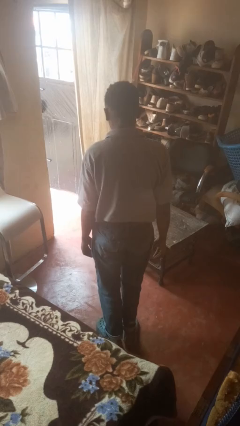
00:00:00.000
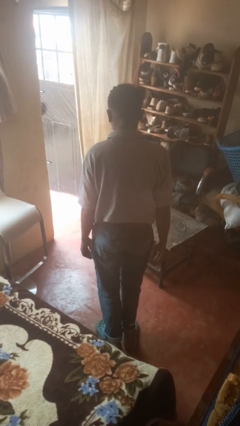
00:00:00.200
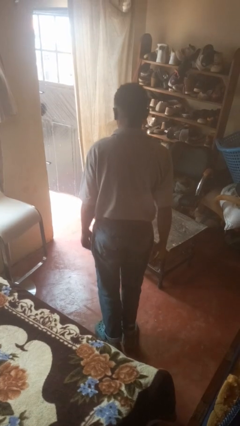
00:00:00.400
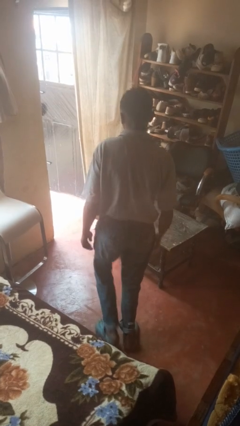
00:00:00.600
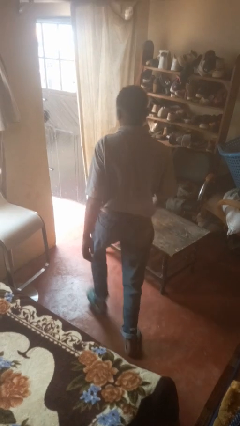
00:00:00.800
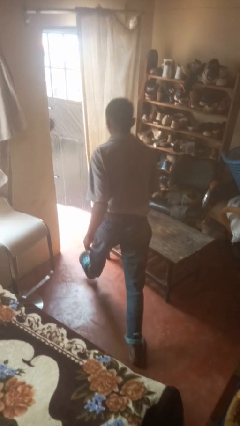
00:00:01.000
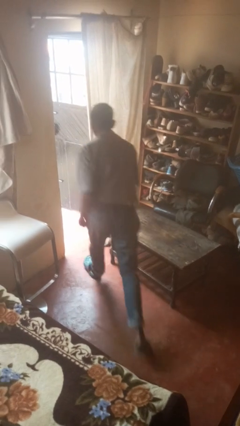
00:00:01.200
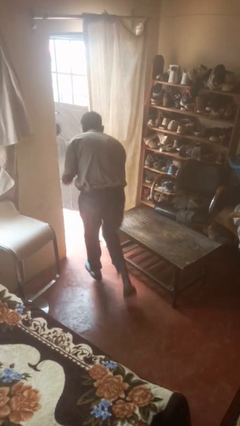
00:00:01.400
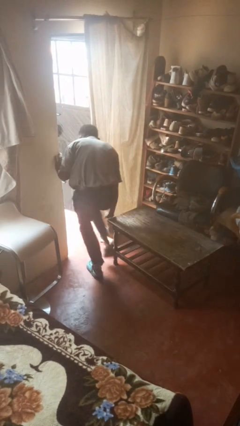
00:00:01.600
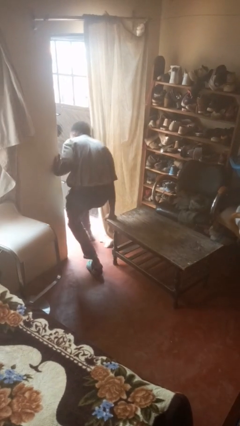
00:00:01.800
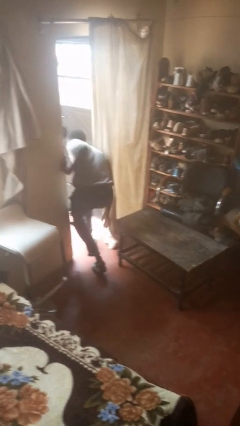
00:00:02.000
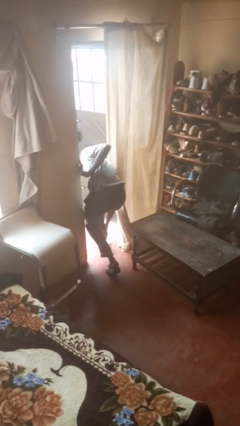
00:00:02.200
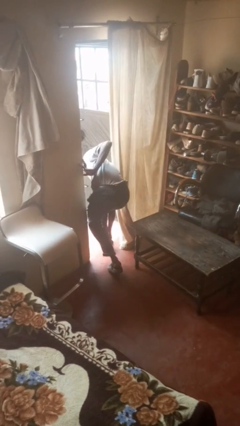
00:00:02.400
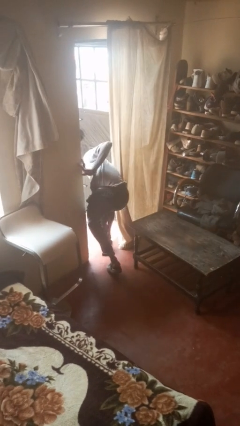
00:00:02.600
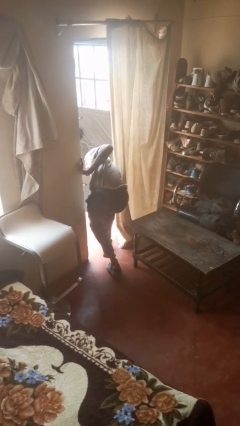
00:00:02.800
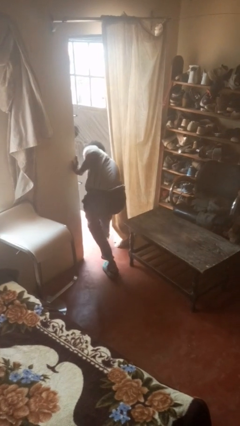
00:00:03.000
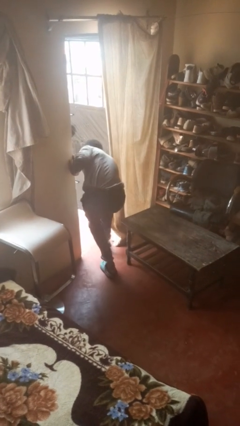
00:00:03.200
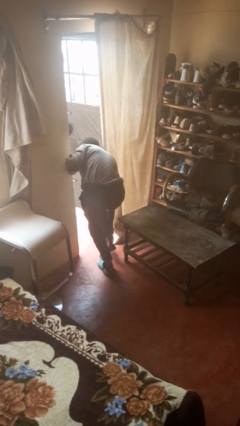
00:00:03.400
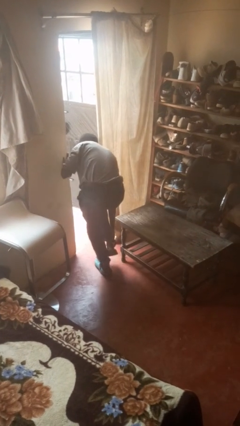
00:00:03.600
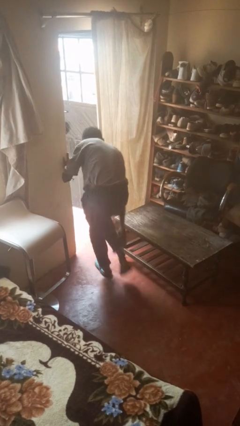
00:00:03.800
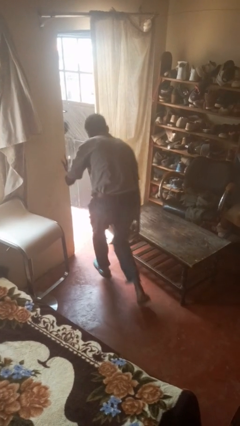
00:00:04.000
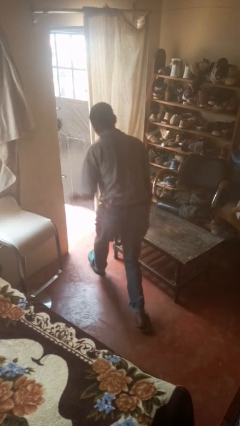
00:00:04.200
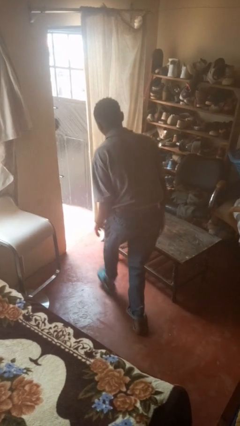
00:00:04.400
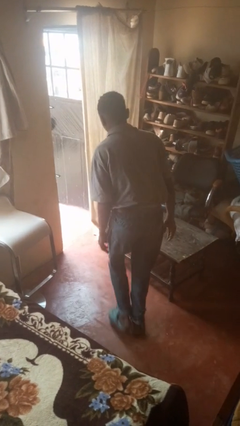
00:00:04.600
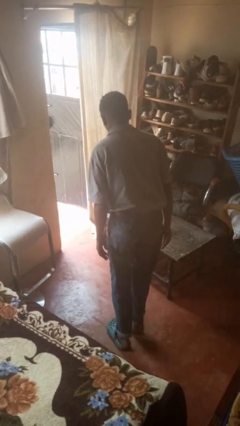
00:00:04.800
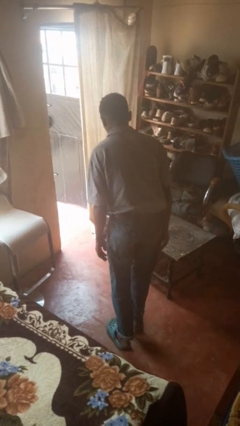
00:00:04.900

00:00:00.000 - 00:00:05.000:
person bumps into table

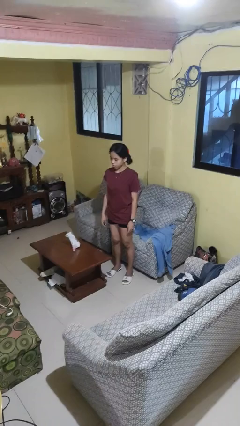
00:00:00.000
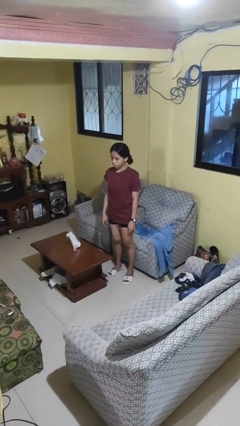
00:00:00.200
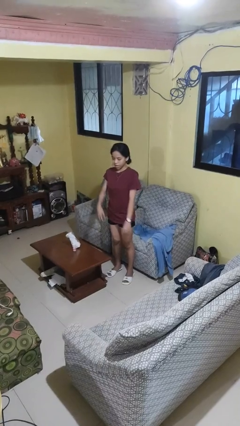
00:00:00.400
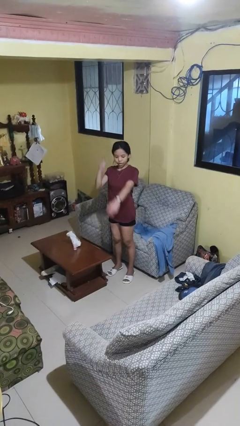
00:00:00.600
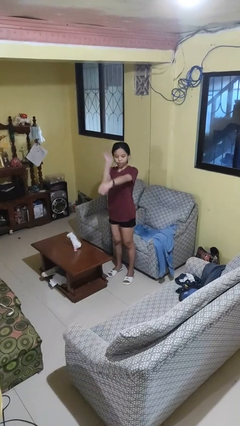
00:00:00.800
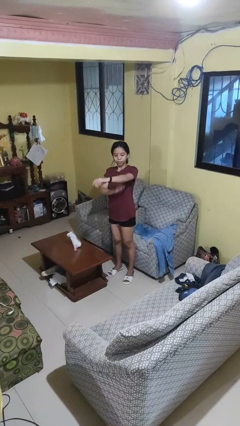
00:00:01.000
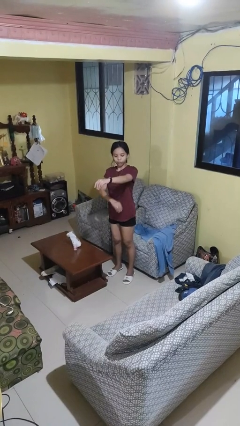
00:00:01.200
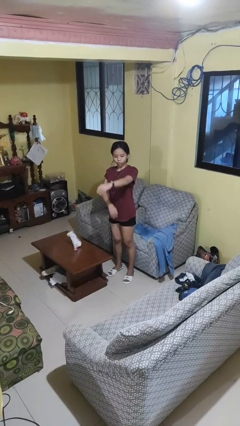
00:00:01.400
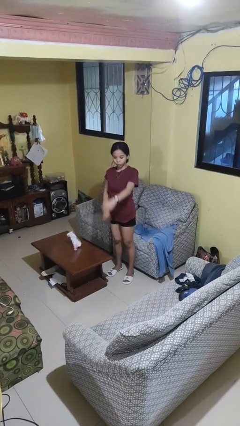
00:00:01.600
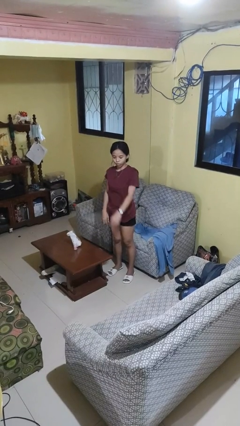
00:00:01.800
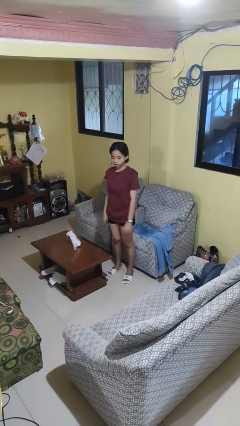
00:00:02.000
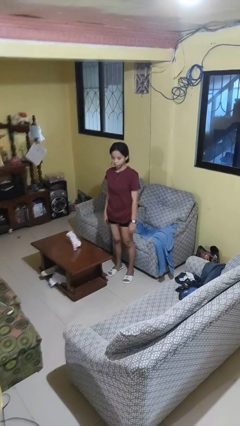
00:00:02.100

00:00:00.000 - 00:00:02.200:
person swats bug

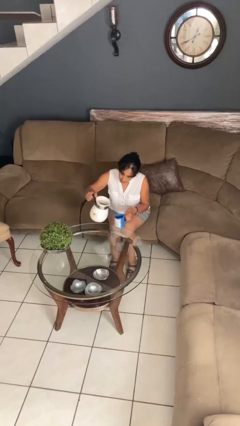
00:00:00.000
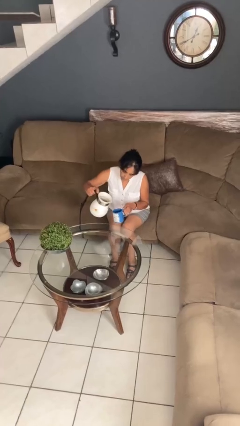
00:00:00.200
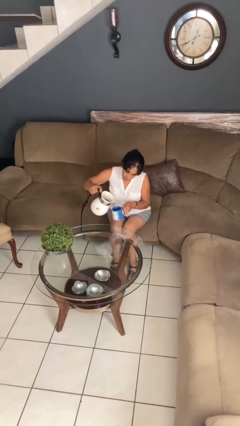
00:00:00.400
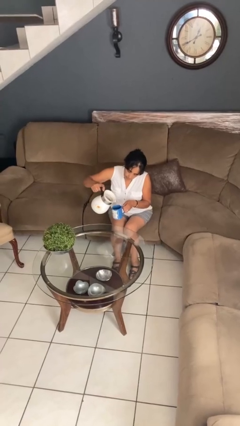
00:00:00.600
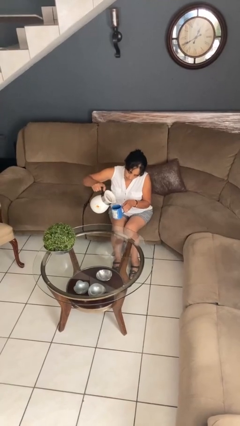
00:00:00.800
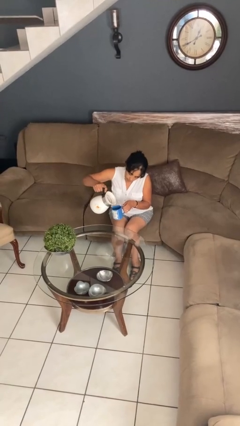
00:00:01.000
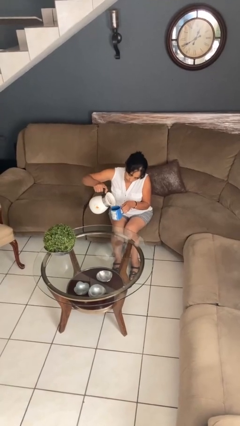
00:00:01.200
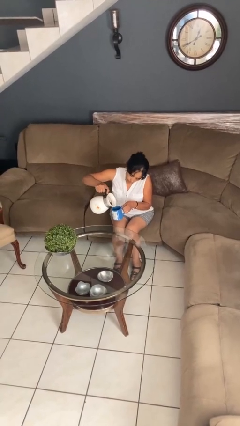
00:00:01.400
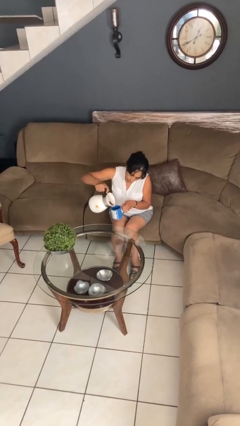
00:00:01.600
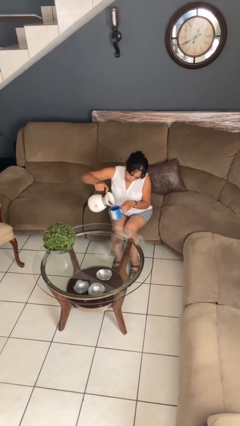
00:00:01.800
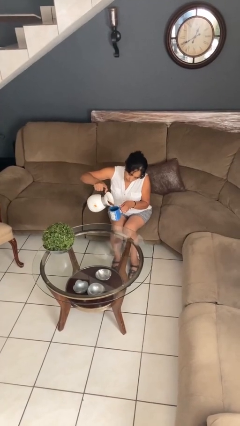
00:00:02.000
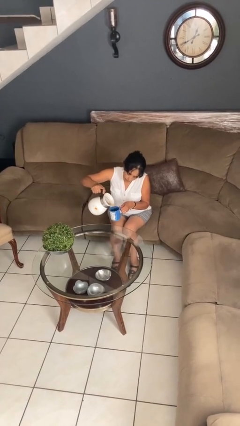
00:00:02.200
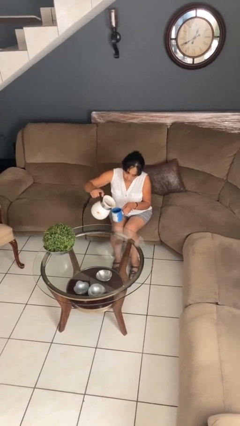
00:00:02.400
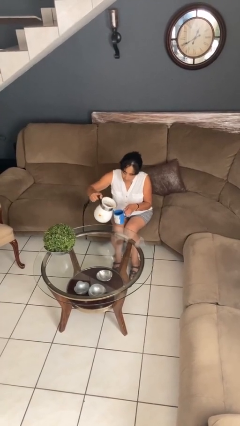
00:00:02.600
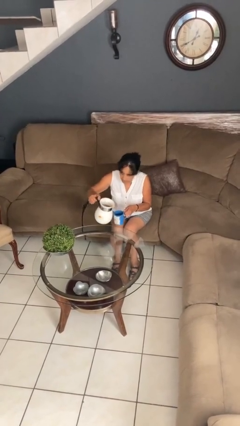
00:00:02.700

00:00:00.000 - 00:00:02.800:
person pours coffee into mug

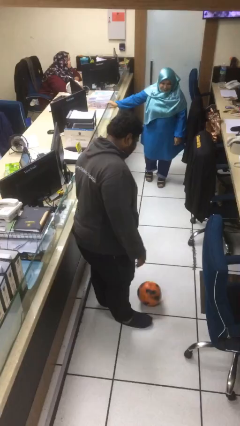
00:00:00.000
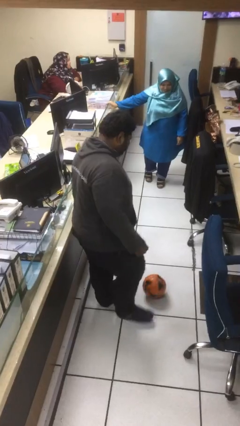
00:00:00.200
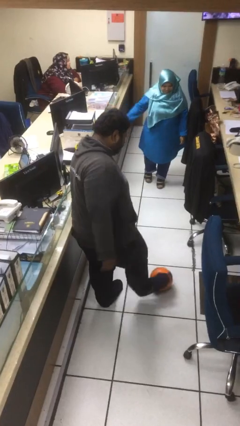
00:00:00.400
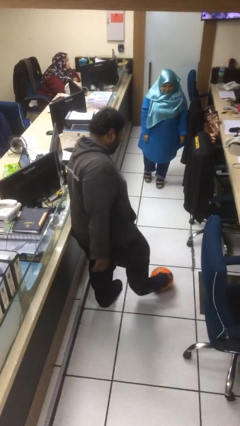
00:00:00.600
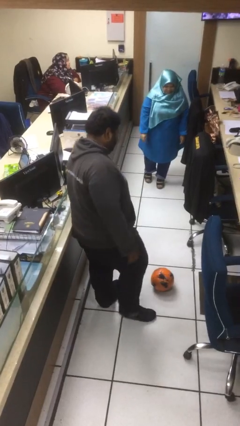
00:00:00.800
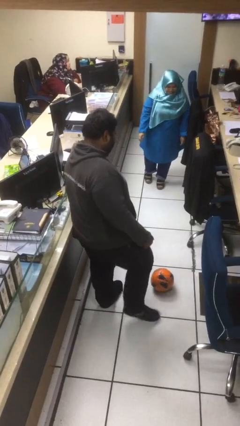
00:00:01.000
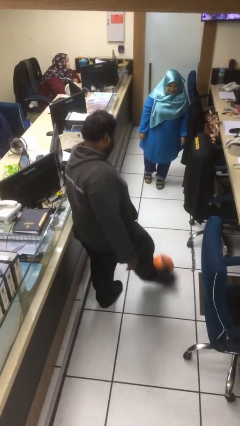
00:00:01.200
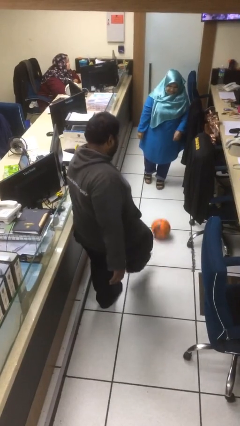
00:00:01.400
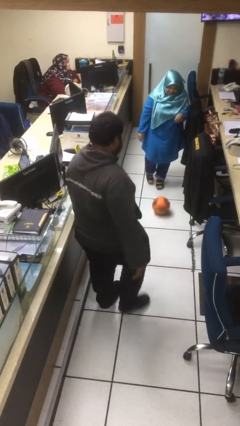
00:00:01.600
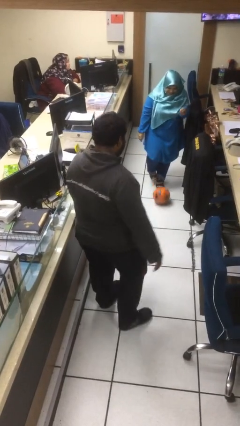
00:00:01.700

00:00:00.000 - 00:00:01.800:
person kicks object to person

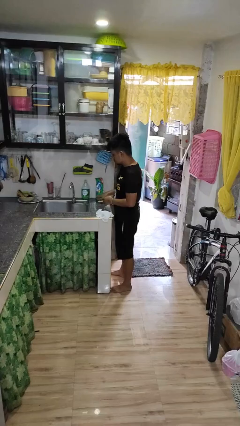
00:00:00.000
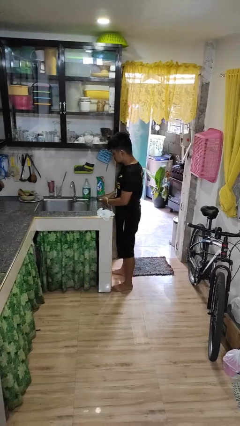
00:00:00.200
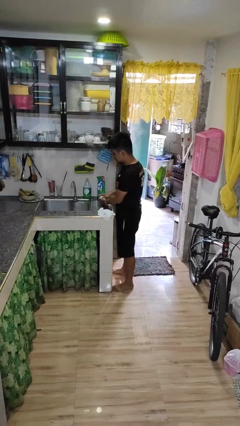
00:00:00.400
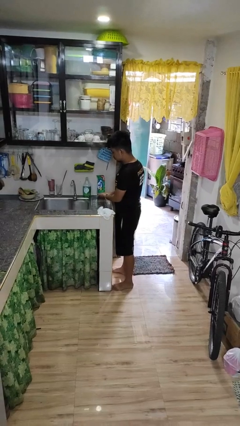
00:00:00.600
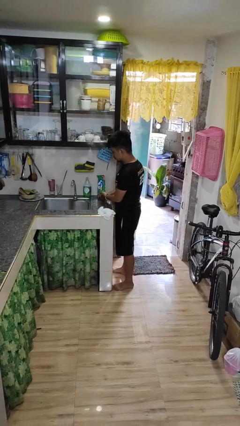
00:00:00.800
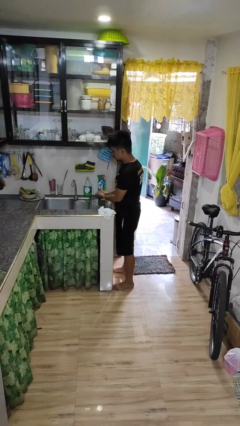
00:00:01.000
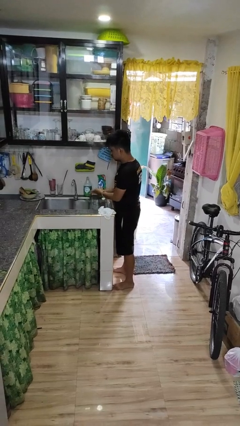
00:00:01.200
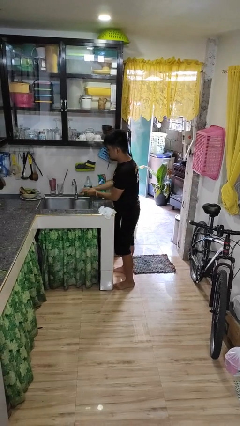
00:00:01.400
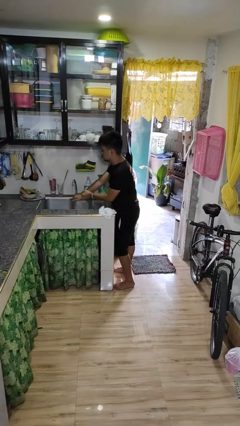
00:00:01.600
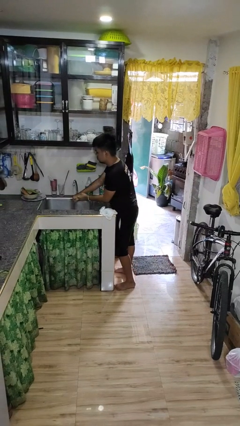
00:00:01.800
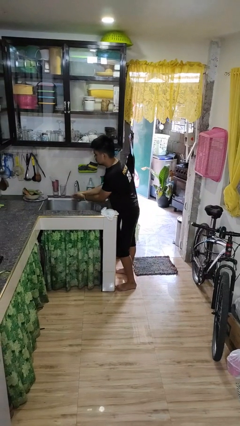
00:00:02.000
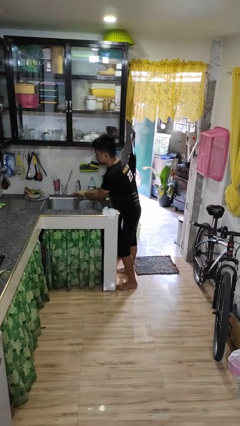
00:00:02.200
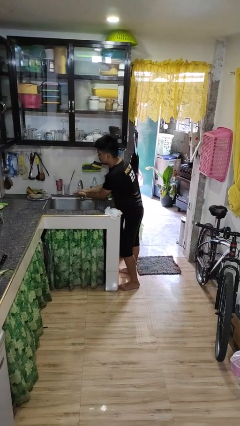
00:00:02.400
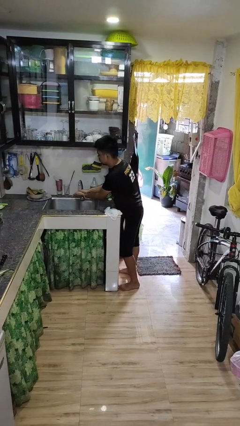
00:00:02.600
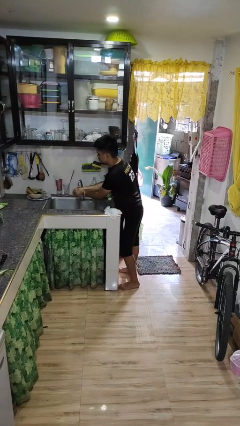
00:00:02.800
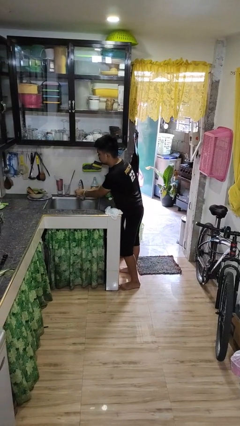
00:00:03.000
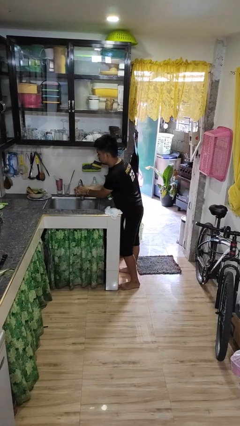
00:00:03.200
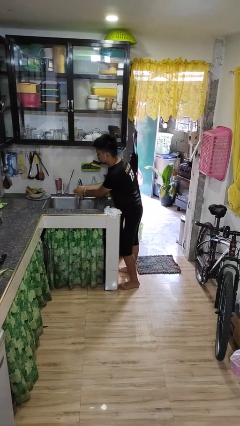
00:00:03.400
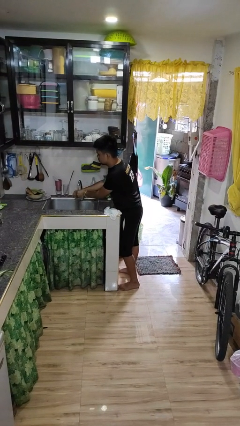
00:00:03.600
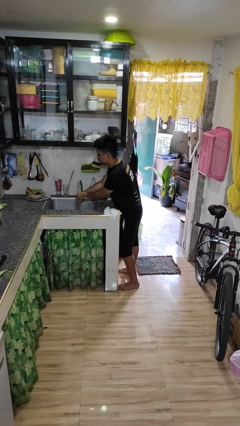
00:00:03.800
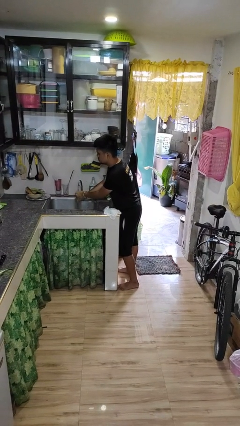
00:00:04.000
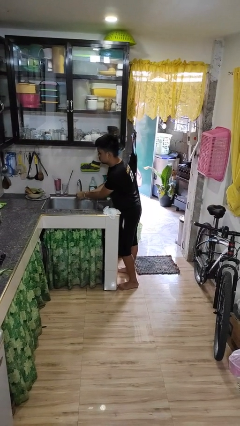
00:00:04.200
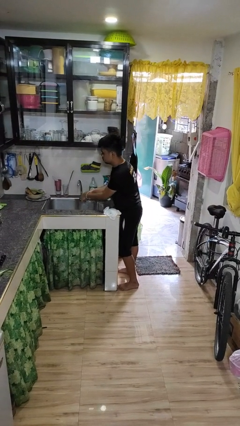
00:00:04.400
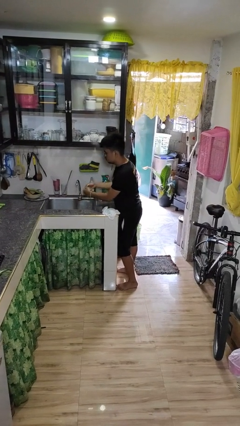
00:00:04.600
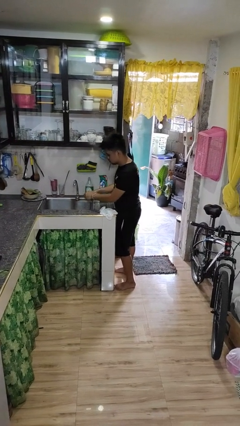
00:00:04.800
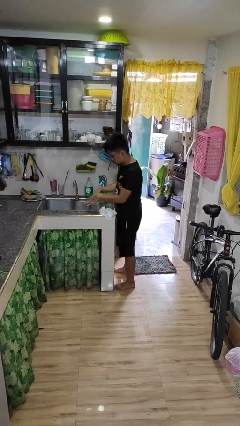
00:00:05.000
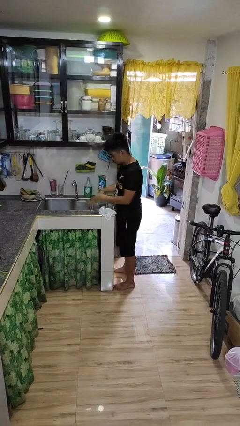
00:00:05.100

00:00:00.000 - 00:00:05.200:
person washes hands

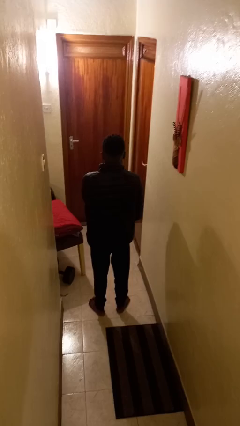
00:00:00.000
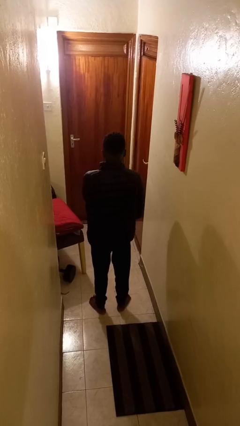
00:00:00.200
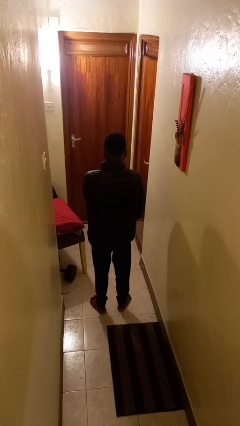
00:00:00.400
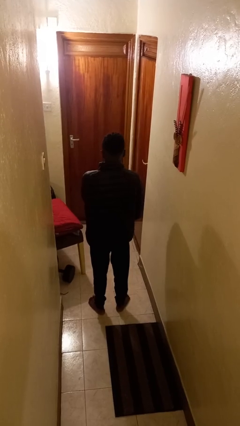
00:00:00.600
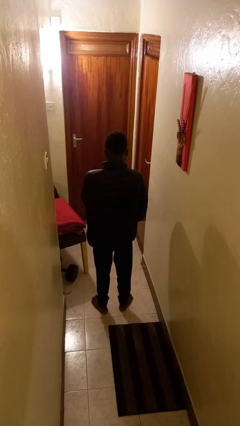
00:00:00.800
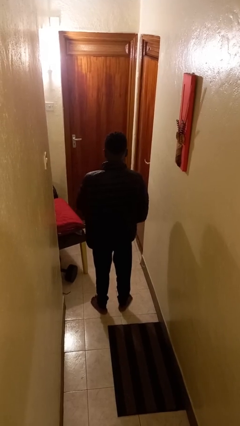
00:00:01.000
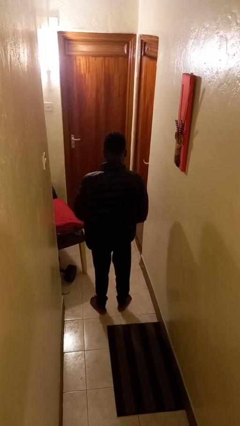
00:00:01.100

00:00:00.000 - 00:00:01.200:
person unzips jacket
